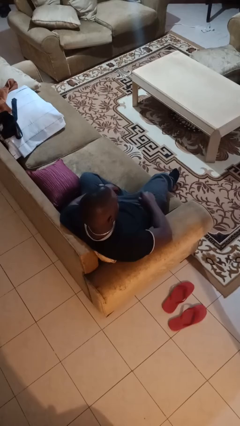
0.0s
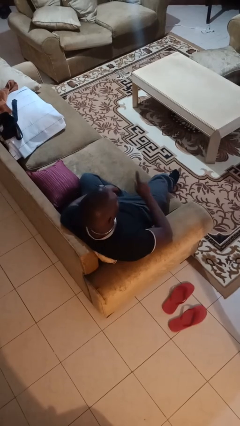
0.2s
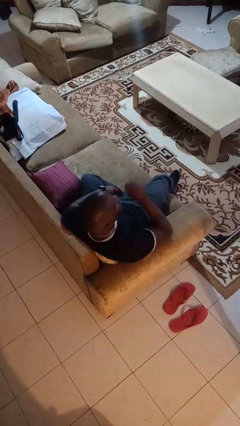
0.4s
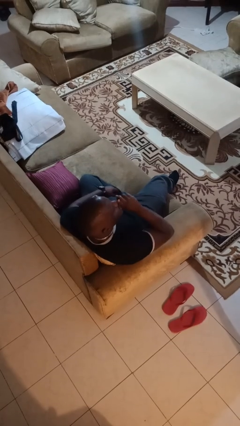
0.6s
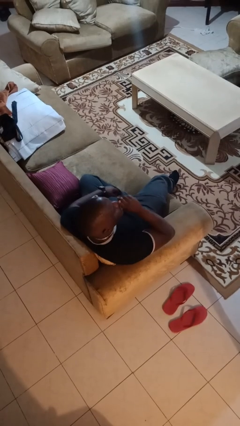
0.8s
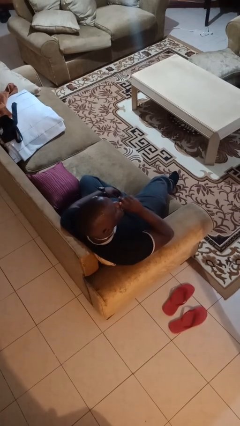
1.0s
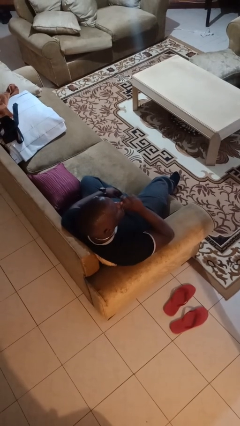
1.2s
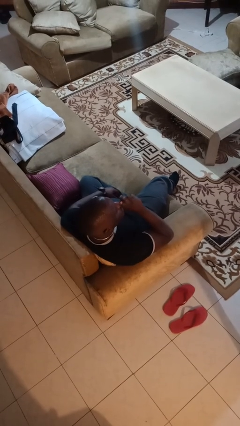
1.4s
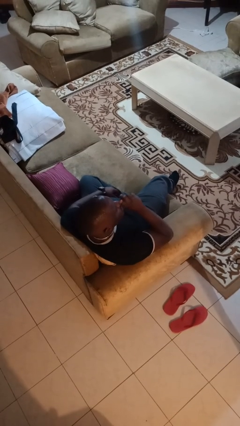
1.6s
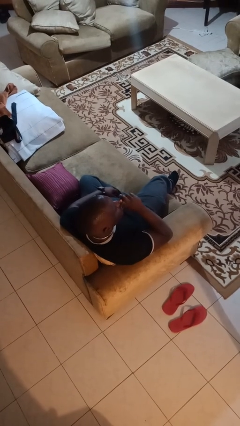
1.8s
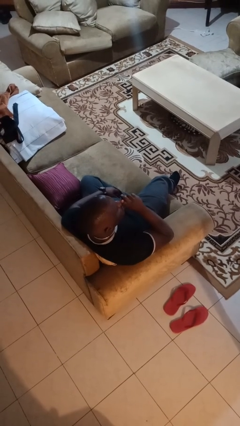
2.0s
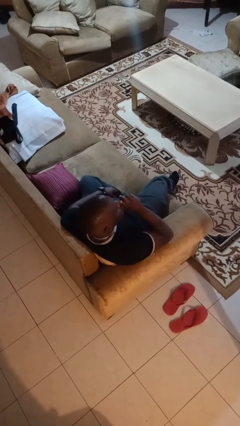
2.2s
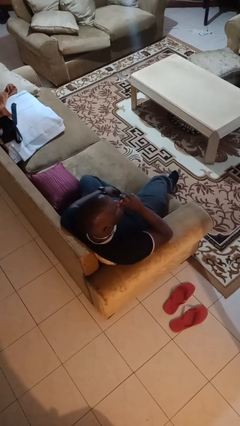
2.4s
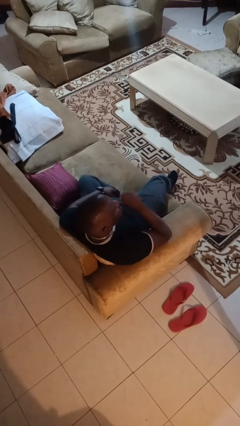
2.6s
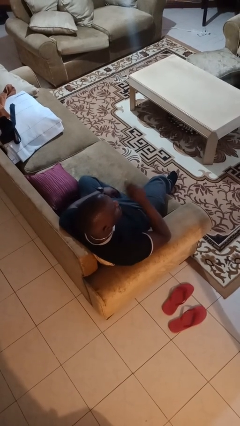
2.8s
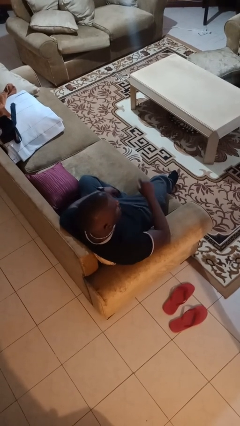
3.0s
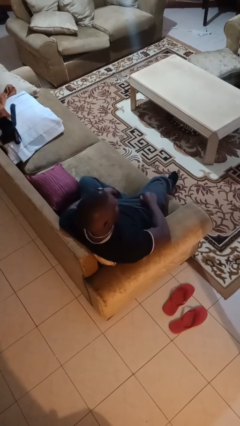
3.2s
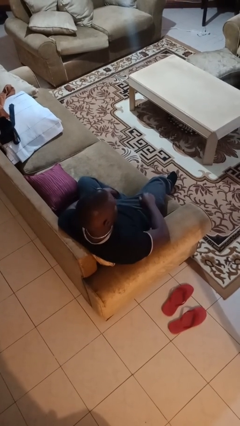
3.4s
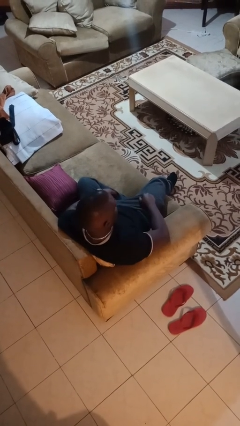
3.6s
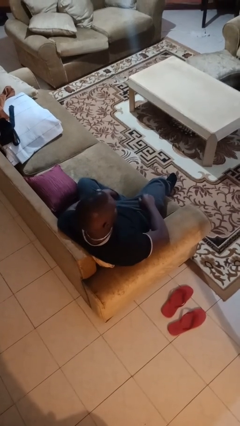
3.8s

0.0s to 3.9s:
person gestures be quiet

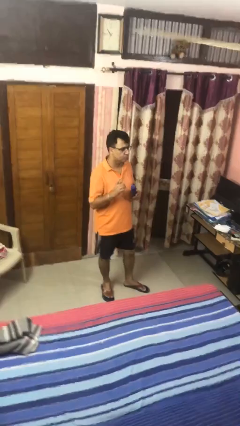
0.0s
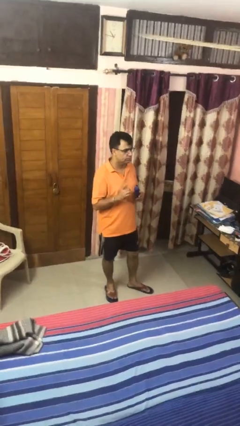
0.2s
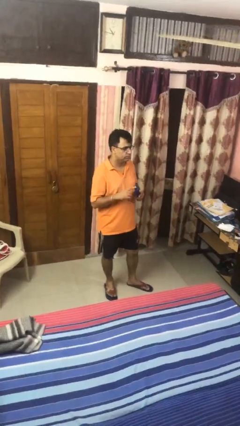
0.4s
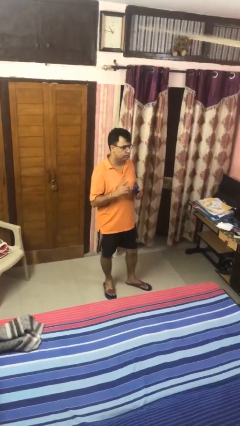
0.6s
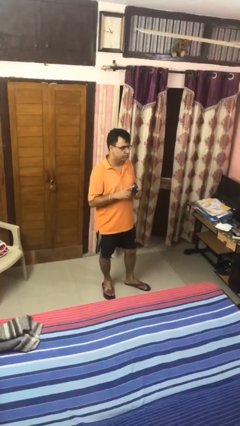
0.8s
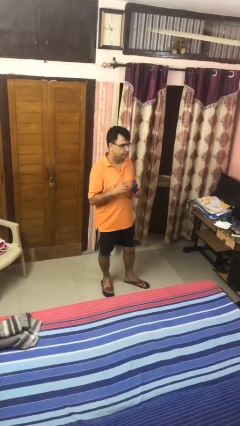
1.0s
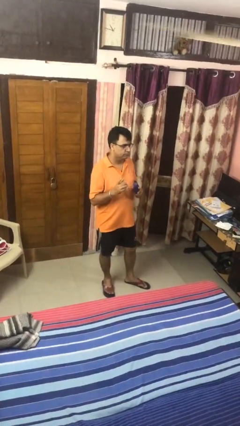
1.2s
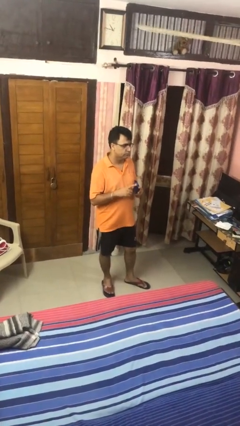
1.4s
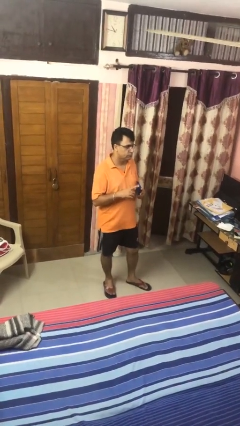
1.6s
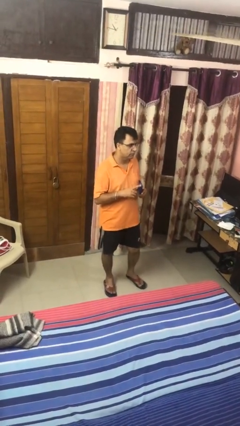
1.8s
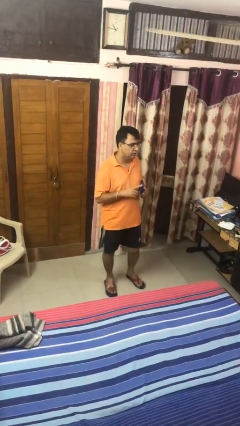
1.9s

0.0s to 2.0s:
person taps object with finger

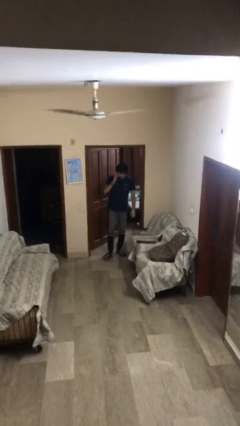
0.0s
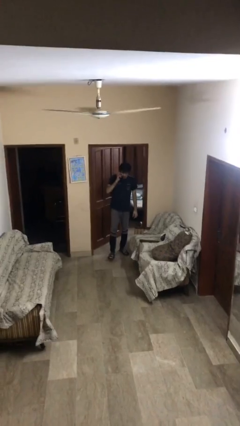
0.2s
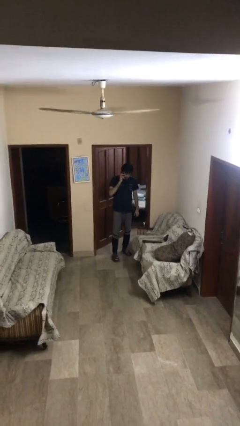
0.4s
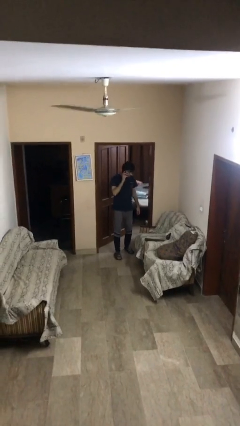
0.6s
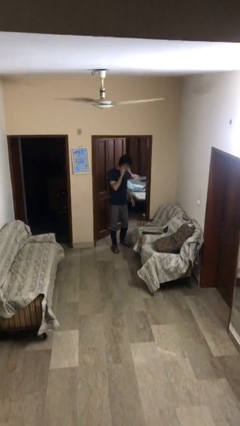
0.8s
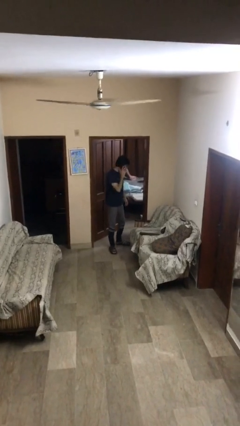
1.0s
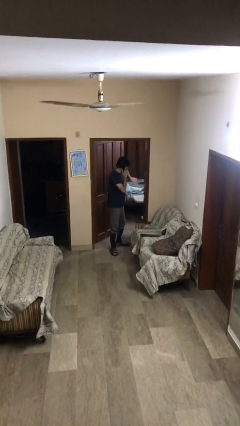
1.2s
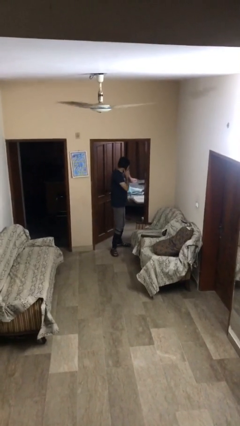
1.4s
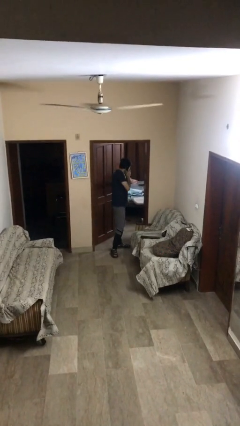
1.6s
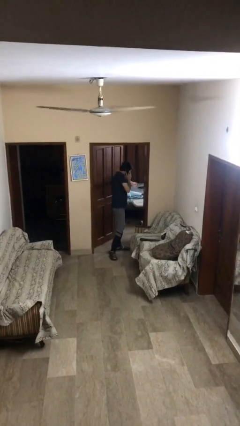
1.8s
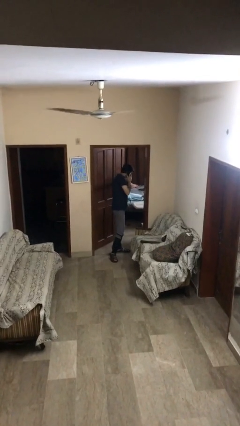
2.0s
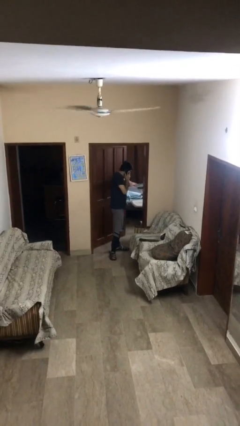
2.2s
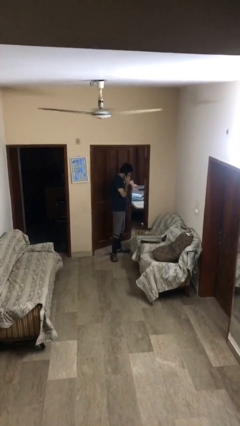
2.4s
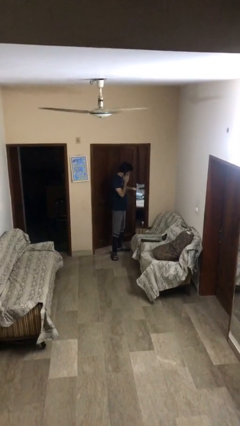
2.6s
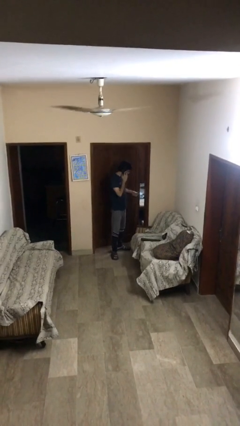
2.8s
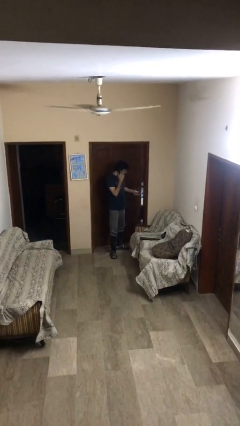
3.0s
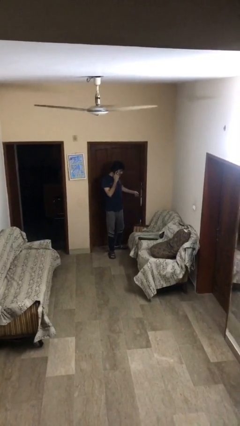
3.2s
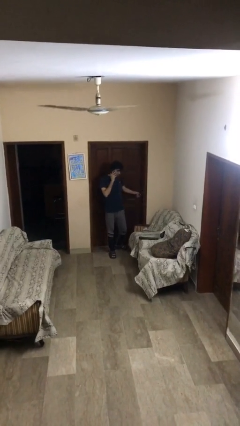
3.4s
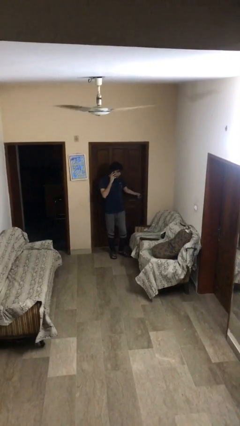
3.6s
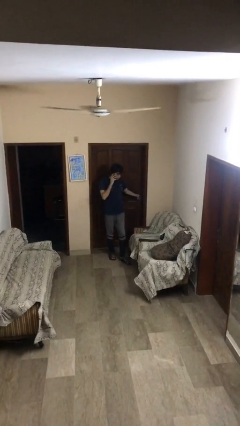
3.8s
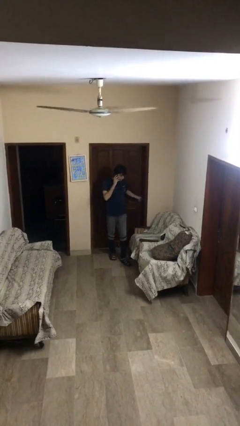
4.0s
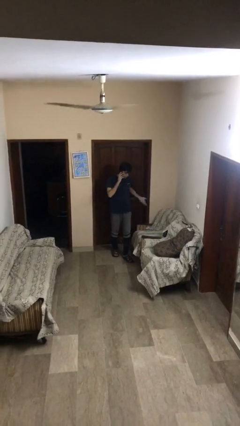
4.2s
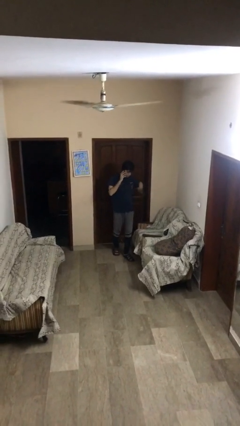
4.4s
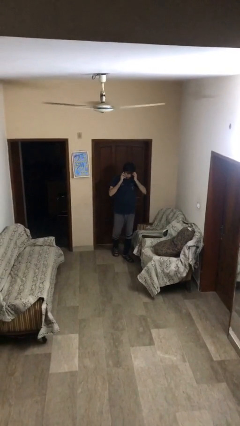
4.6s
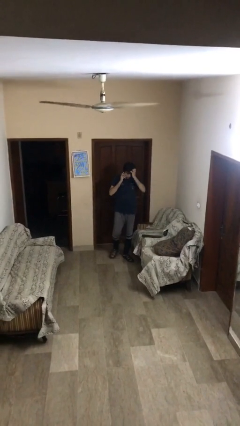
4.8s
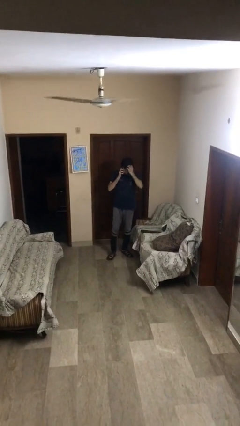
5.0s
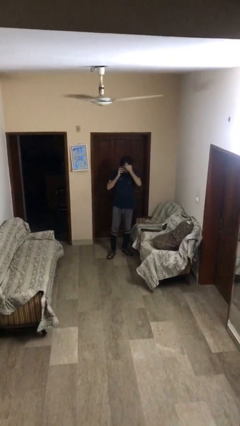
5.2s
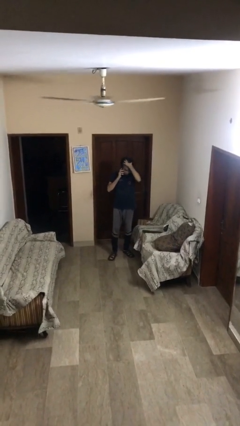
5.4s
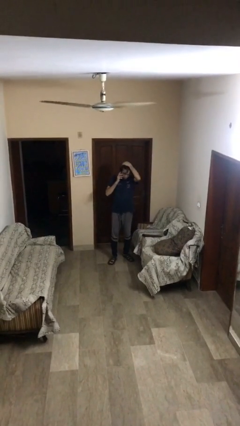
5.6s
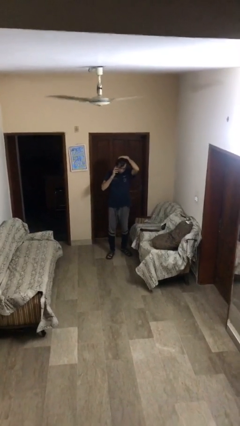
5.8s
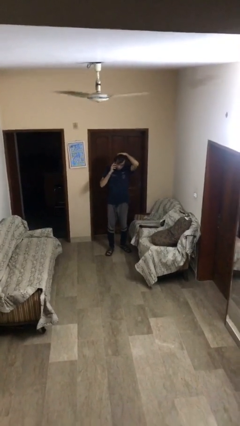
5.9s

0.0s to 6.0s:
person closes facility door

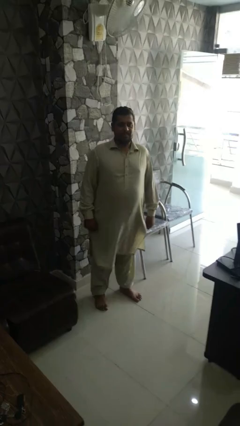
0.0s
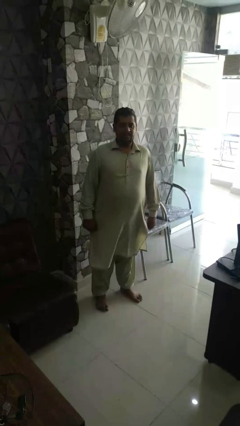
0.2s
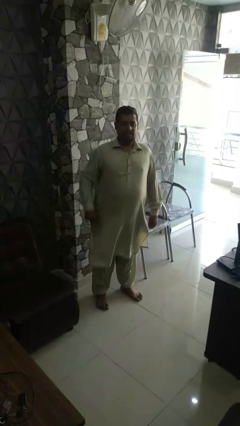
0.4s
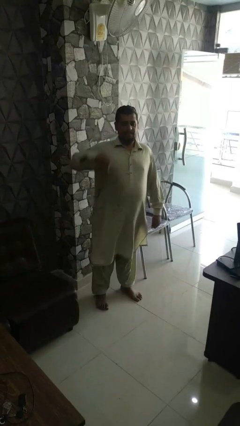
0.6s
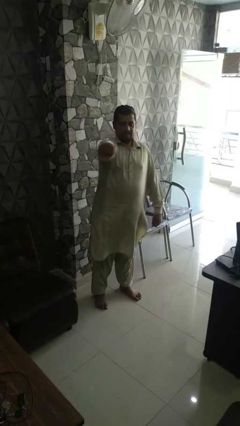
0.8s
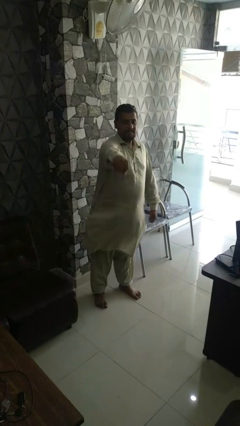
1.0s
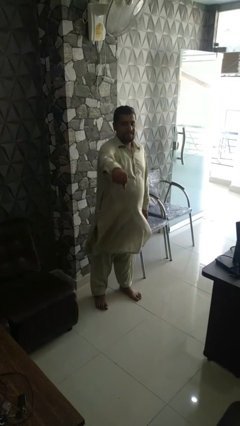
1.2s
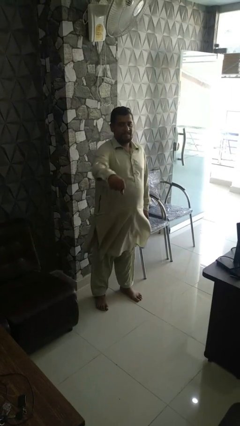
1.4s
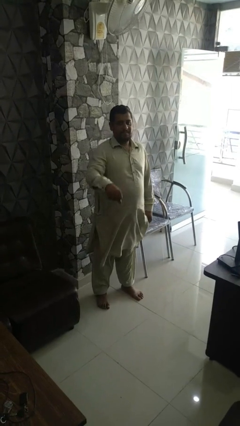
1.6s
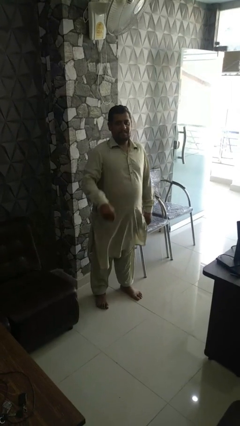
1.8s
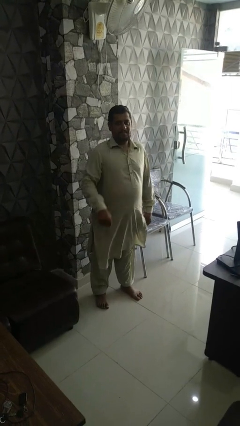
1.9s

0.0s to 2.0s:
person karate chop

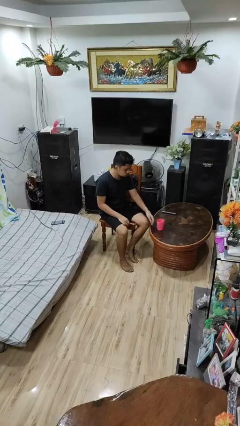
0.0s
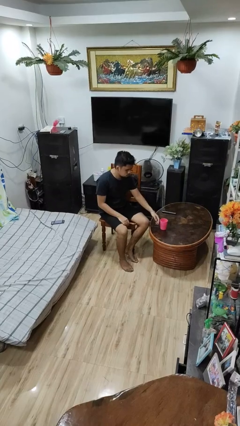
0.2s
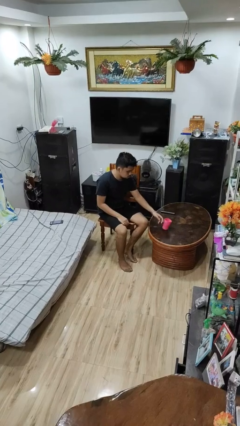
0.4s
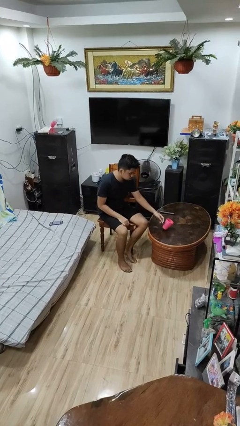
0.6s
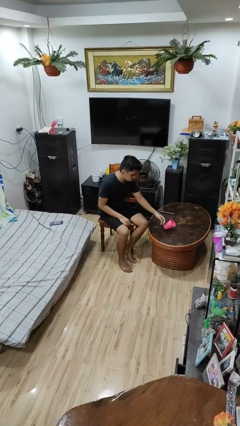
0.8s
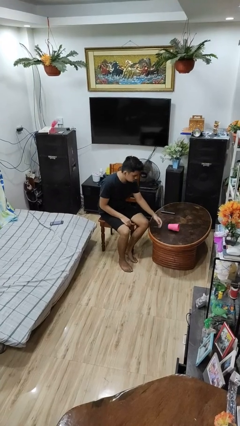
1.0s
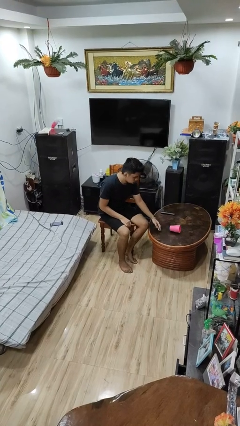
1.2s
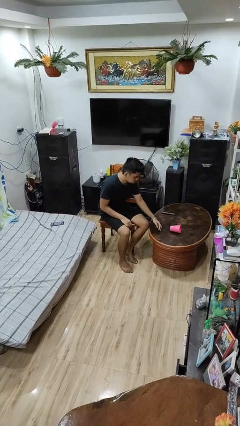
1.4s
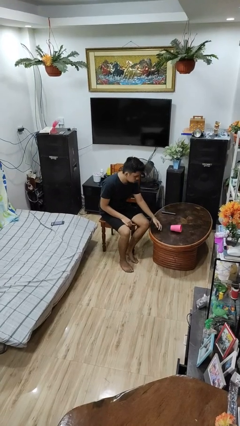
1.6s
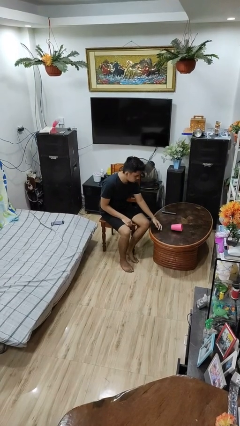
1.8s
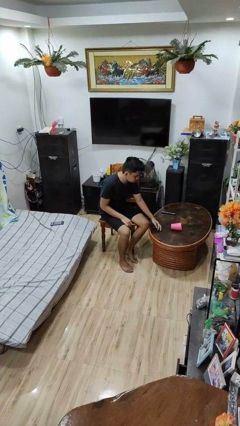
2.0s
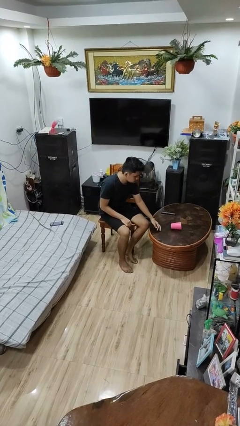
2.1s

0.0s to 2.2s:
person knocks over glass

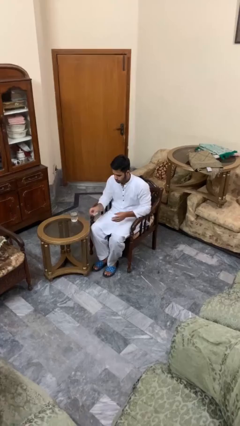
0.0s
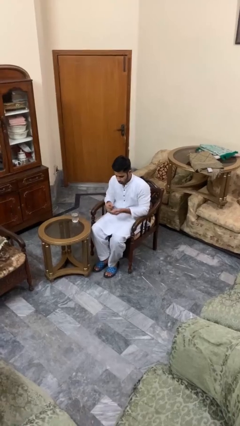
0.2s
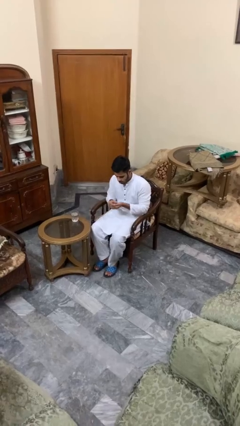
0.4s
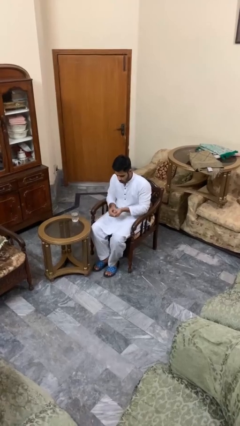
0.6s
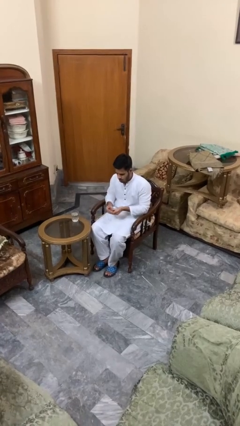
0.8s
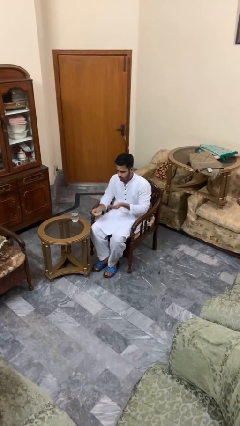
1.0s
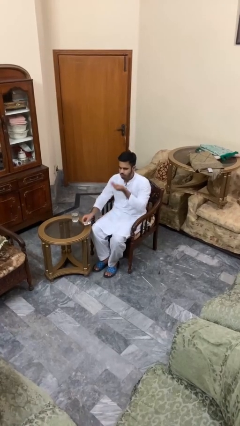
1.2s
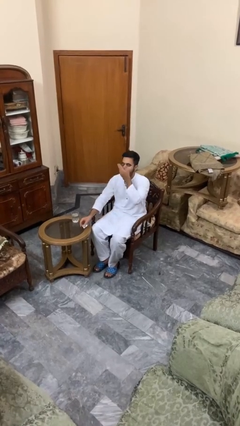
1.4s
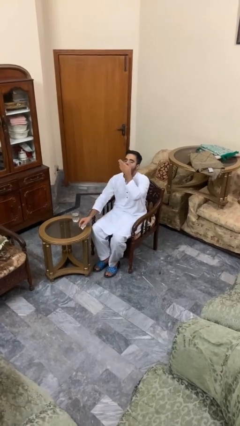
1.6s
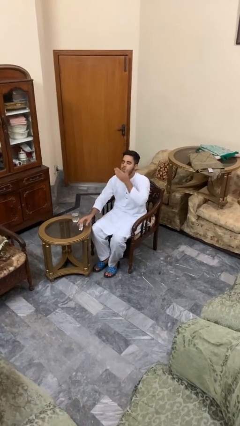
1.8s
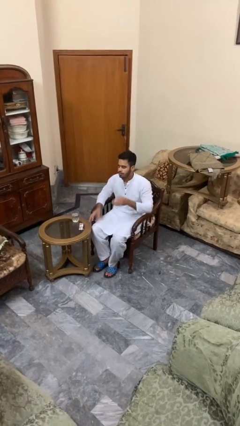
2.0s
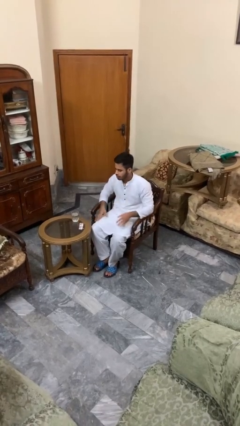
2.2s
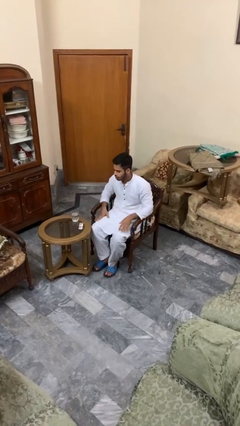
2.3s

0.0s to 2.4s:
person takes medicine pills
